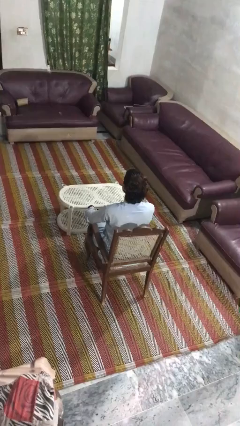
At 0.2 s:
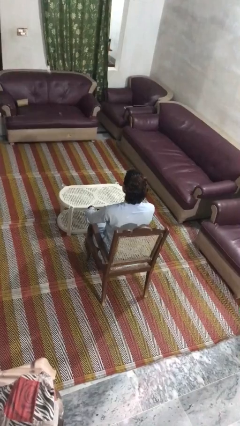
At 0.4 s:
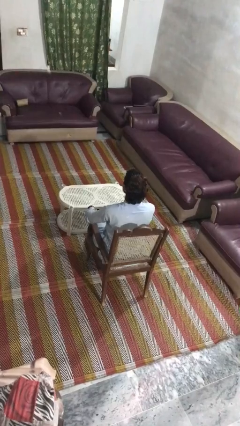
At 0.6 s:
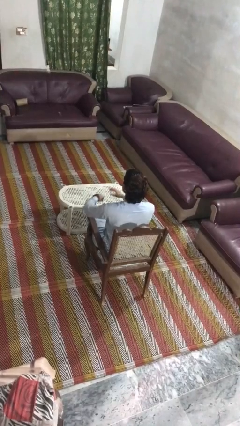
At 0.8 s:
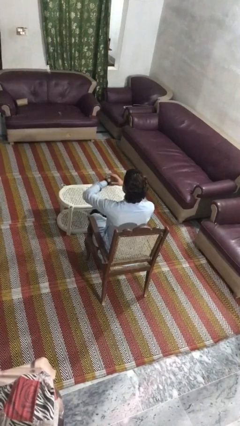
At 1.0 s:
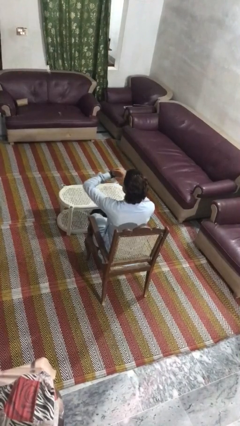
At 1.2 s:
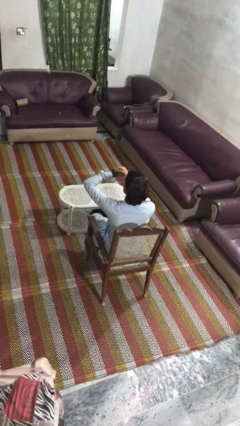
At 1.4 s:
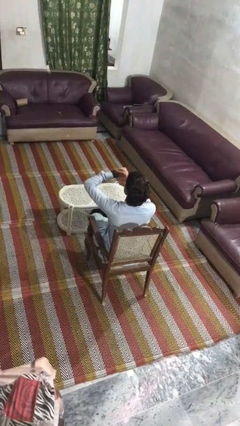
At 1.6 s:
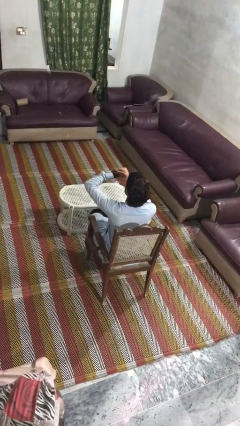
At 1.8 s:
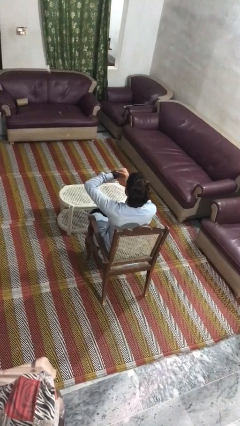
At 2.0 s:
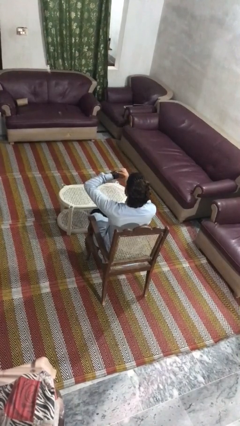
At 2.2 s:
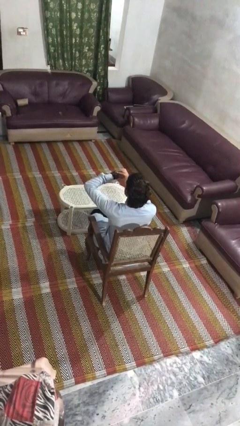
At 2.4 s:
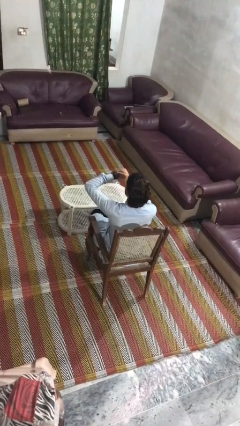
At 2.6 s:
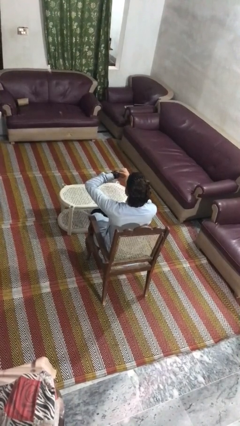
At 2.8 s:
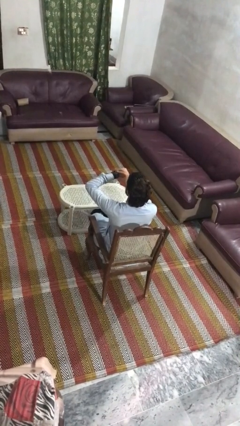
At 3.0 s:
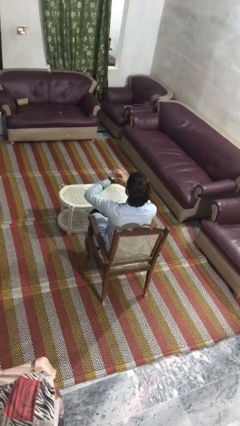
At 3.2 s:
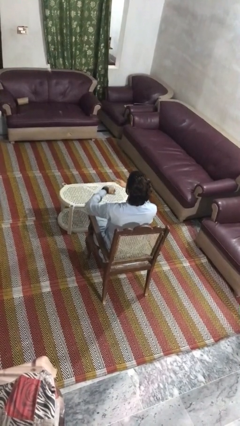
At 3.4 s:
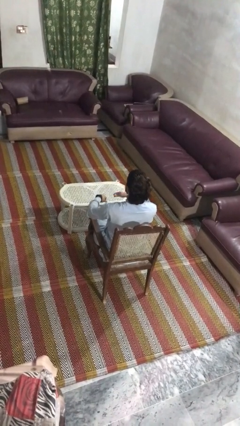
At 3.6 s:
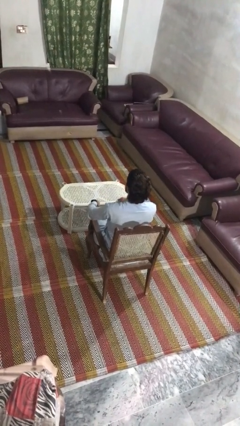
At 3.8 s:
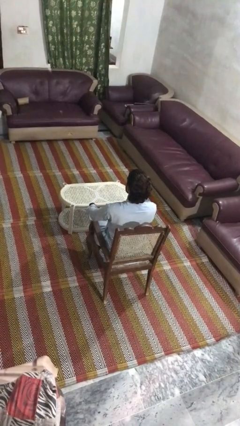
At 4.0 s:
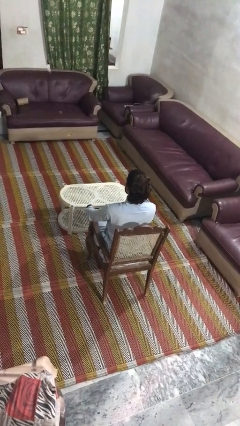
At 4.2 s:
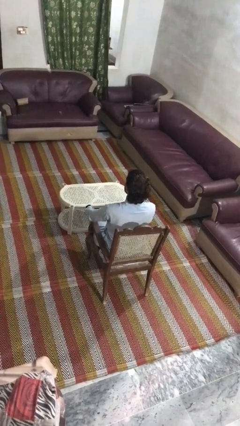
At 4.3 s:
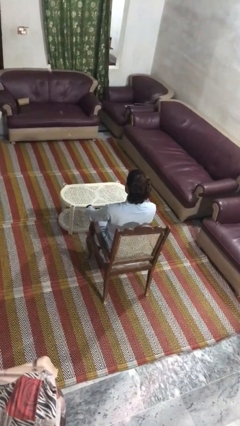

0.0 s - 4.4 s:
person looks at wristwatch

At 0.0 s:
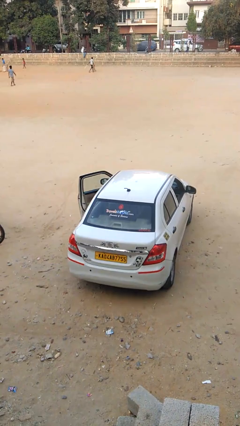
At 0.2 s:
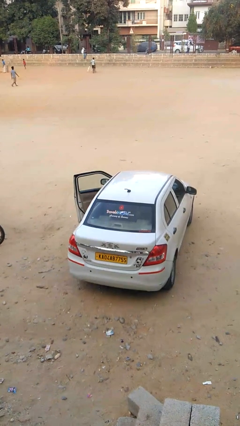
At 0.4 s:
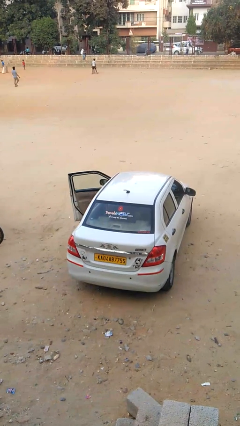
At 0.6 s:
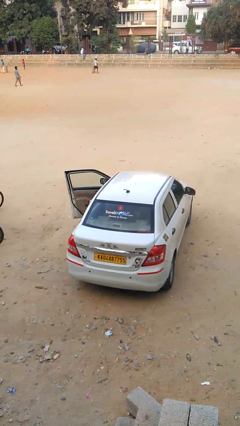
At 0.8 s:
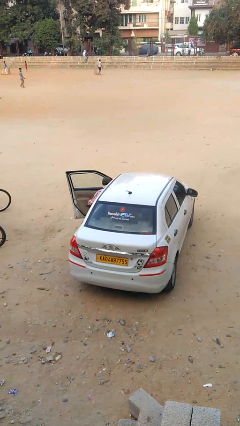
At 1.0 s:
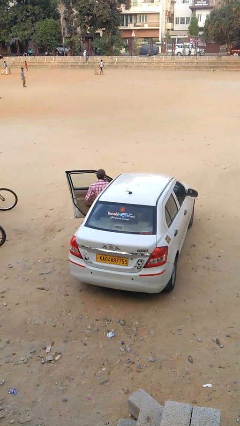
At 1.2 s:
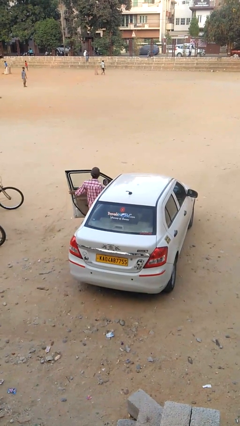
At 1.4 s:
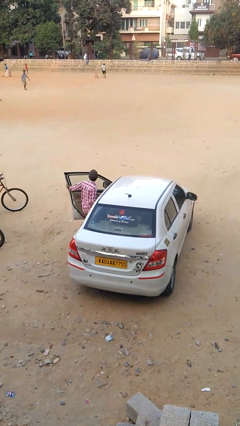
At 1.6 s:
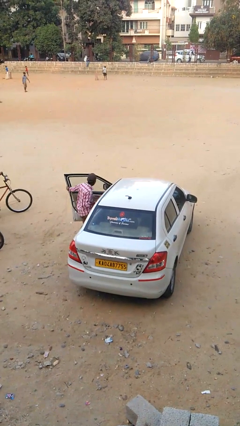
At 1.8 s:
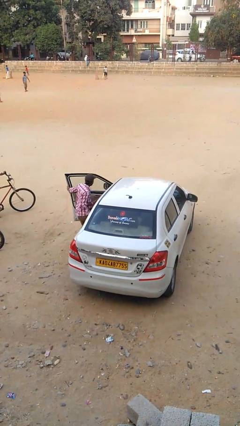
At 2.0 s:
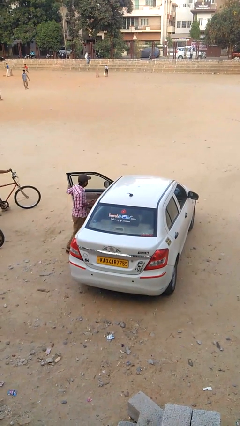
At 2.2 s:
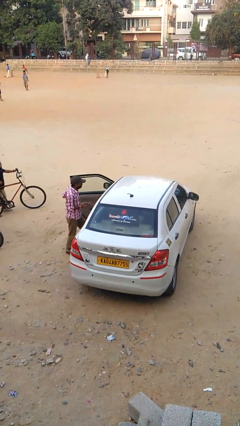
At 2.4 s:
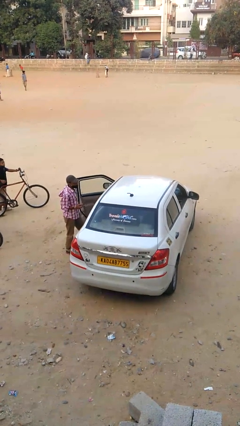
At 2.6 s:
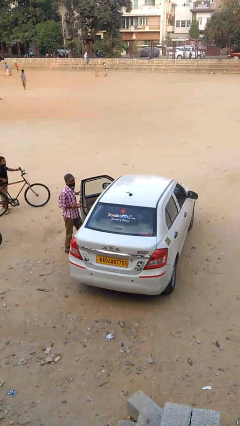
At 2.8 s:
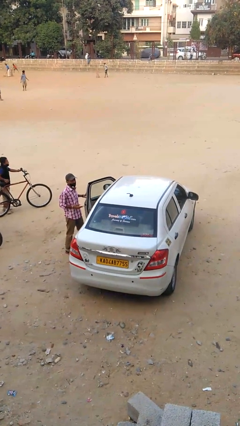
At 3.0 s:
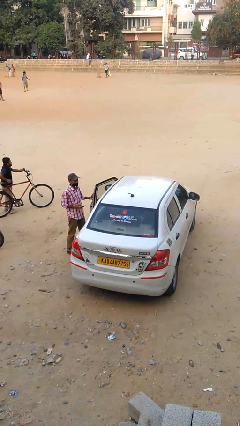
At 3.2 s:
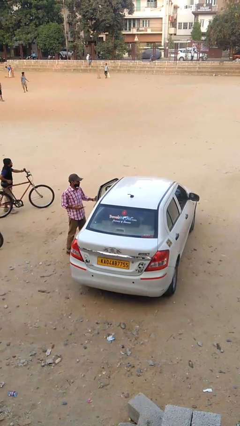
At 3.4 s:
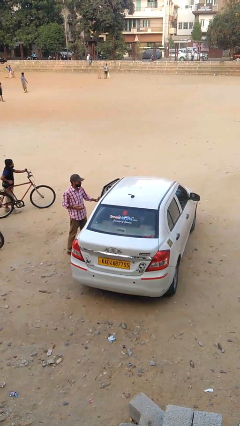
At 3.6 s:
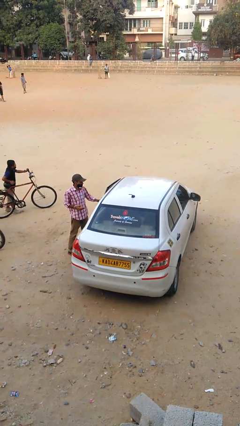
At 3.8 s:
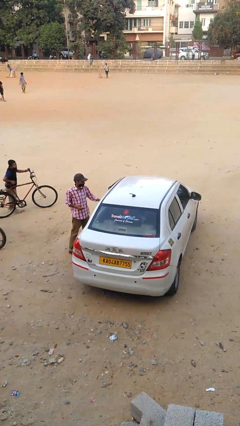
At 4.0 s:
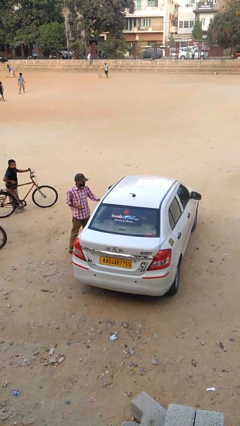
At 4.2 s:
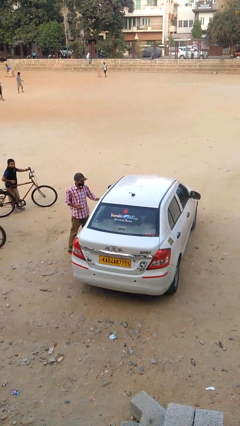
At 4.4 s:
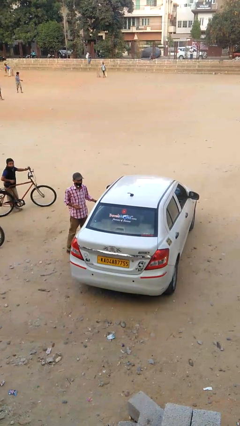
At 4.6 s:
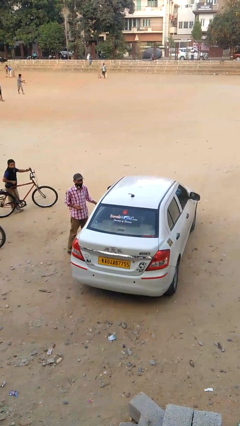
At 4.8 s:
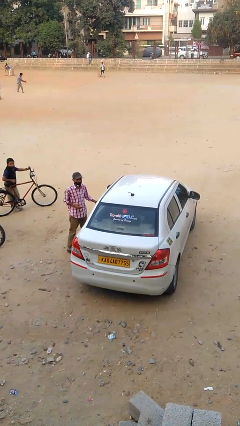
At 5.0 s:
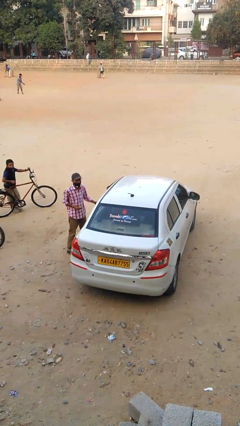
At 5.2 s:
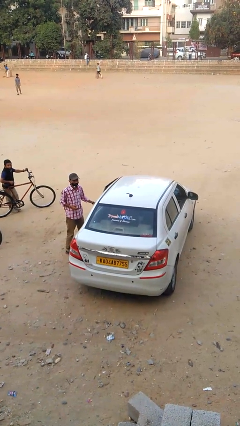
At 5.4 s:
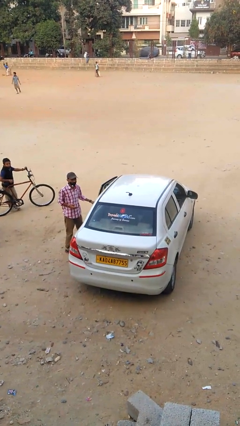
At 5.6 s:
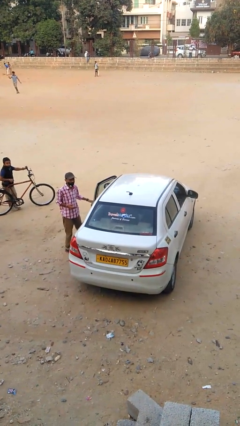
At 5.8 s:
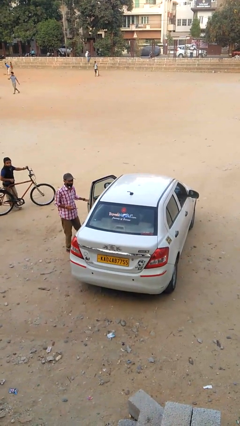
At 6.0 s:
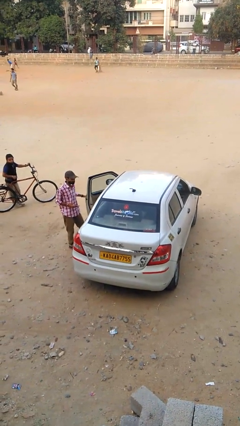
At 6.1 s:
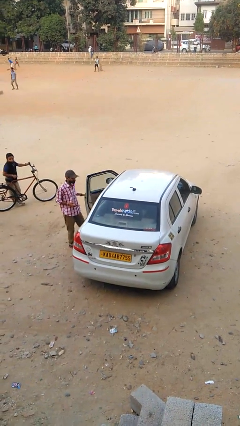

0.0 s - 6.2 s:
car drops off person

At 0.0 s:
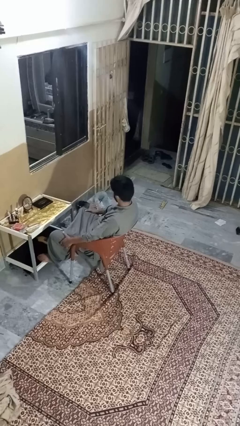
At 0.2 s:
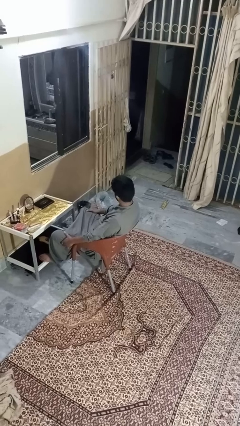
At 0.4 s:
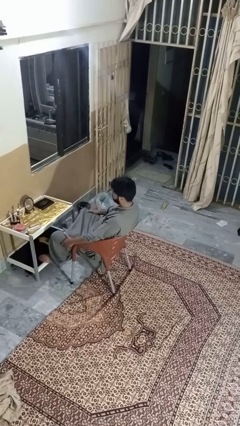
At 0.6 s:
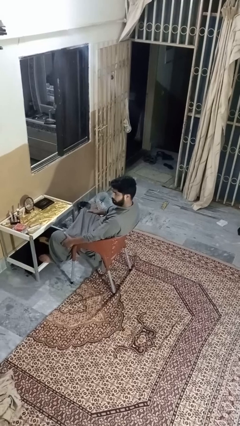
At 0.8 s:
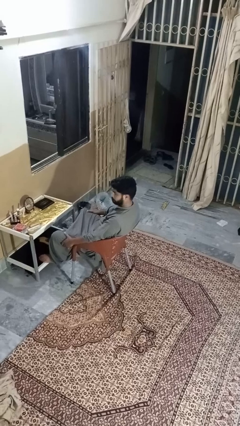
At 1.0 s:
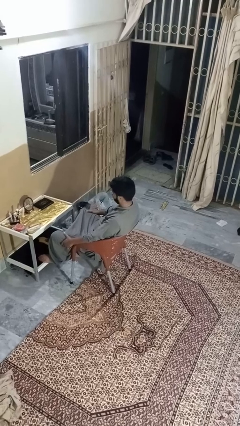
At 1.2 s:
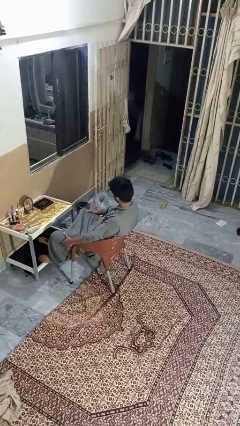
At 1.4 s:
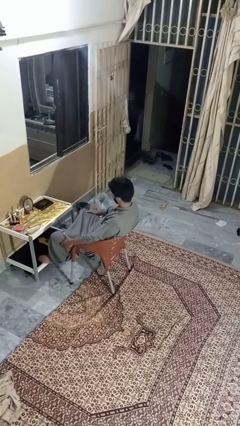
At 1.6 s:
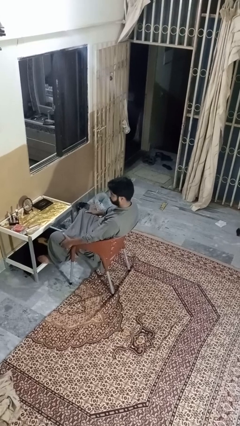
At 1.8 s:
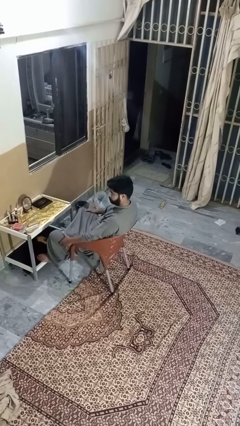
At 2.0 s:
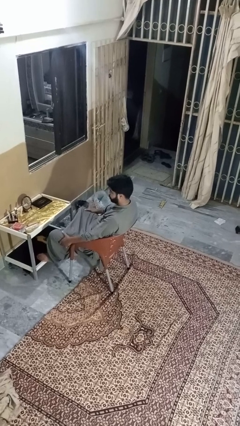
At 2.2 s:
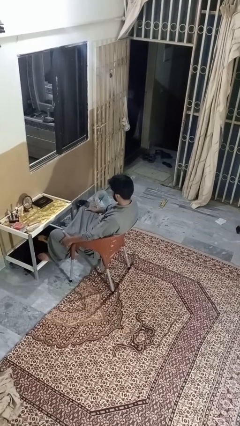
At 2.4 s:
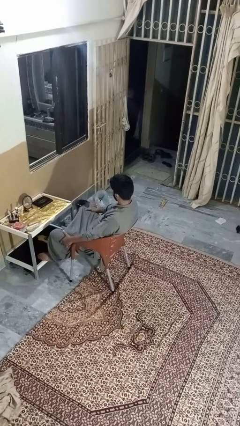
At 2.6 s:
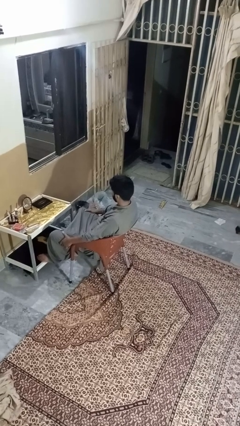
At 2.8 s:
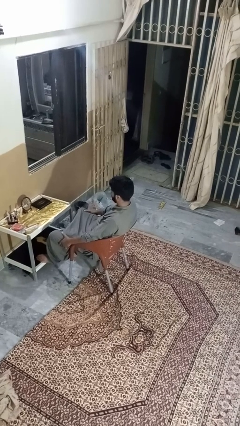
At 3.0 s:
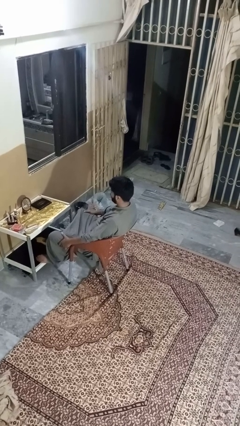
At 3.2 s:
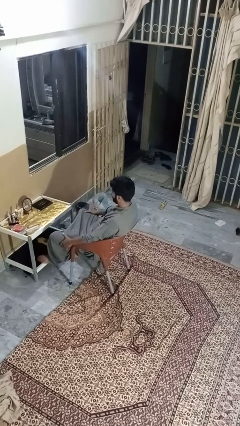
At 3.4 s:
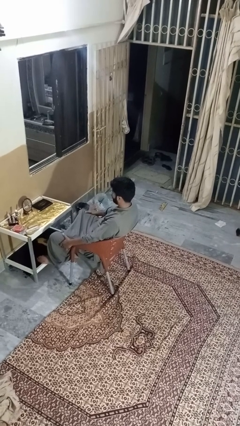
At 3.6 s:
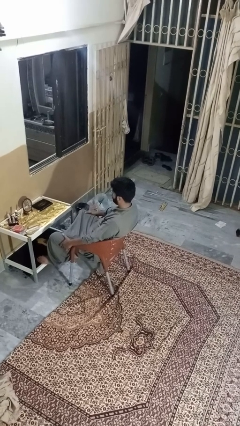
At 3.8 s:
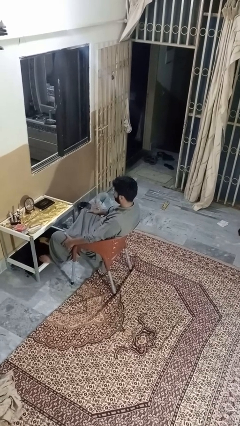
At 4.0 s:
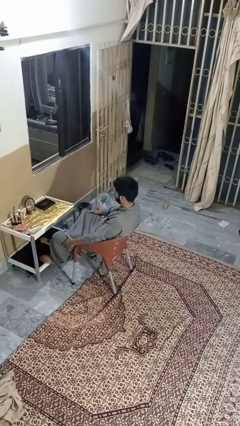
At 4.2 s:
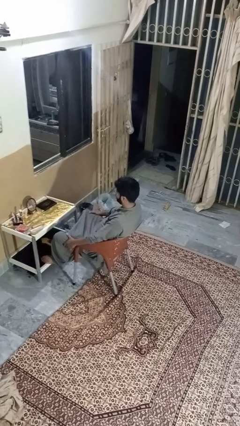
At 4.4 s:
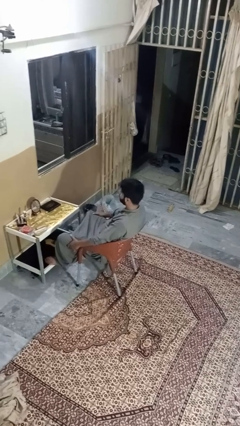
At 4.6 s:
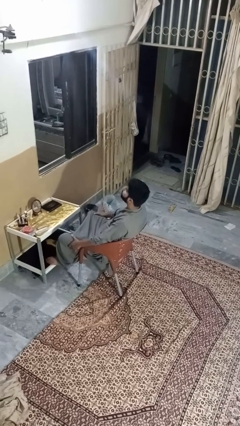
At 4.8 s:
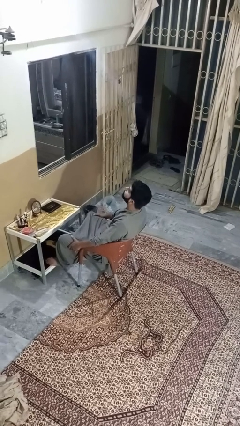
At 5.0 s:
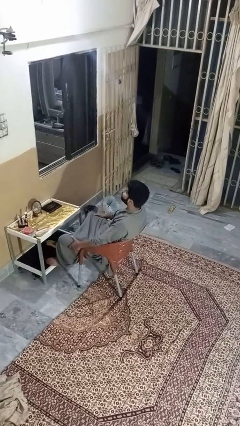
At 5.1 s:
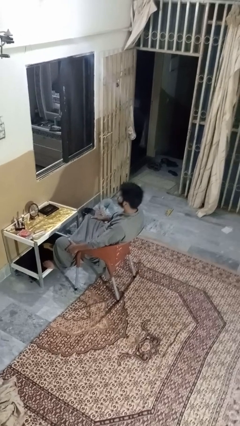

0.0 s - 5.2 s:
person shakes head

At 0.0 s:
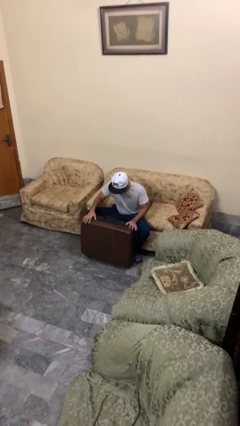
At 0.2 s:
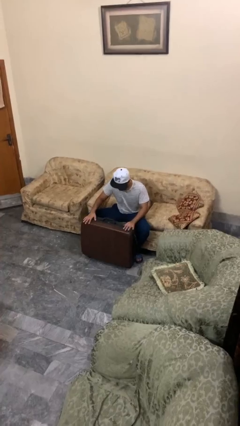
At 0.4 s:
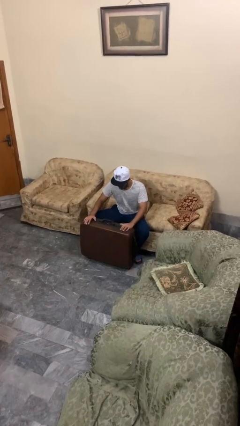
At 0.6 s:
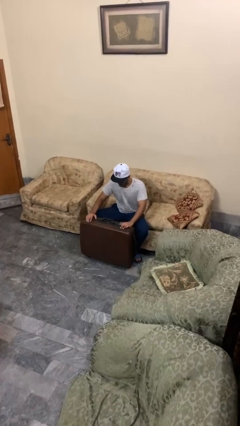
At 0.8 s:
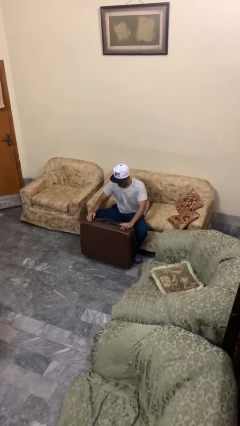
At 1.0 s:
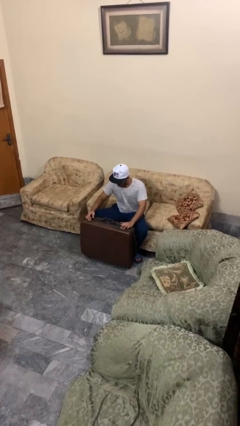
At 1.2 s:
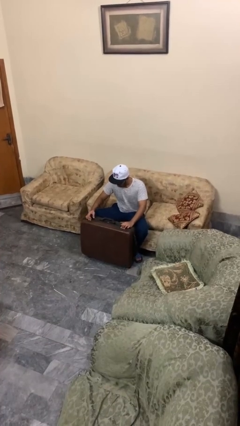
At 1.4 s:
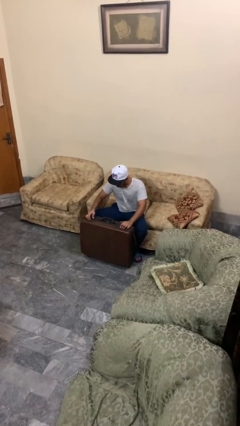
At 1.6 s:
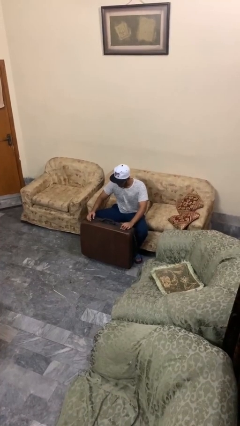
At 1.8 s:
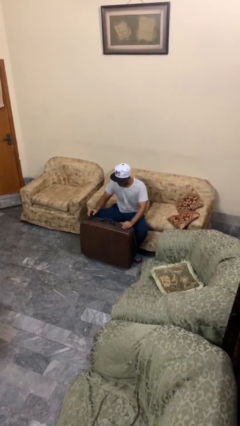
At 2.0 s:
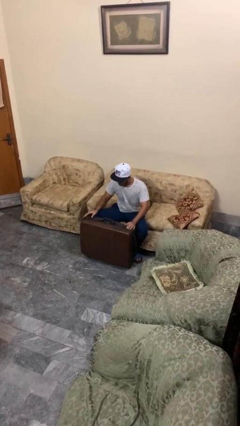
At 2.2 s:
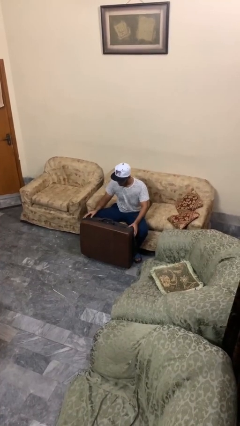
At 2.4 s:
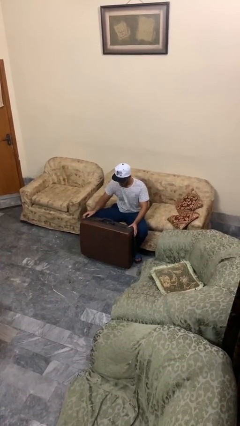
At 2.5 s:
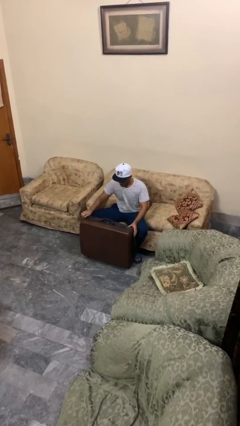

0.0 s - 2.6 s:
person closes suitcase
